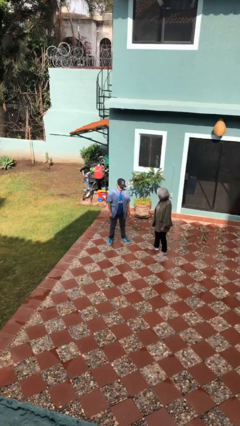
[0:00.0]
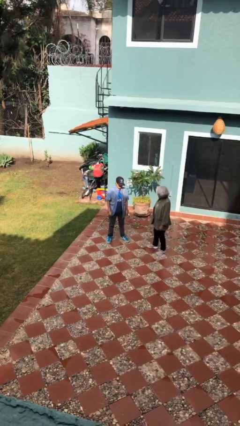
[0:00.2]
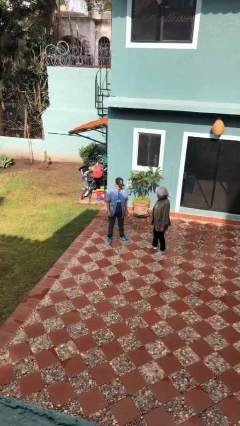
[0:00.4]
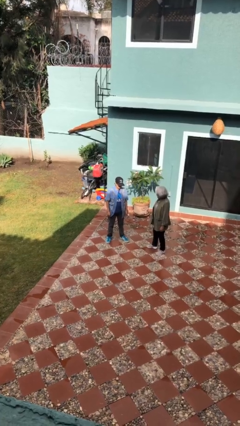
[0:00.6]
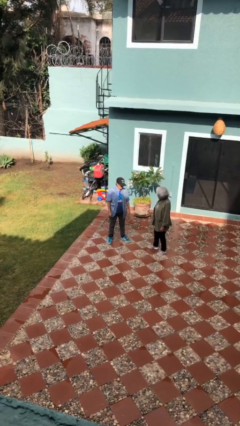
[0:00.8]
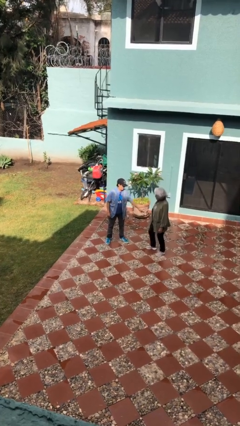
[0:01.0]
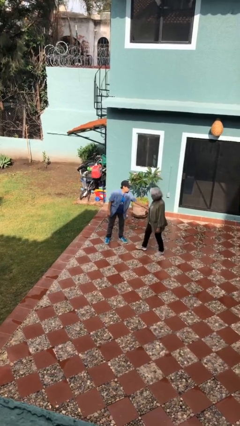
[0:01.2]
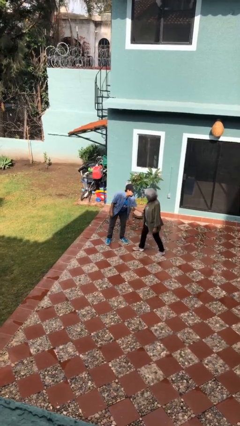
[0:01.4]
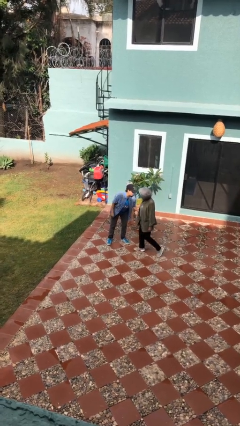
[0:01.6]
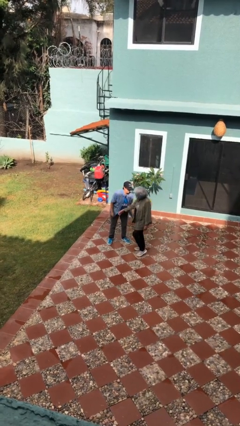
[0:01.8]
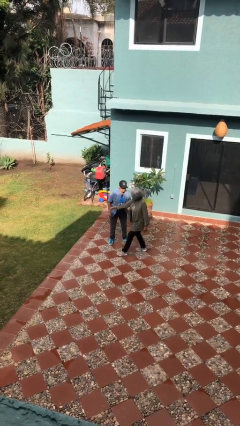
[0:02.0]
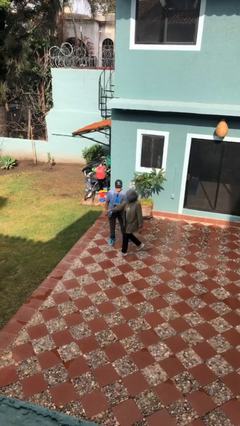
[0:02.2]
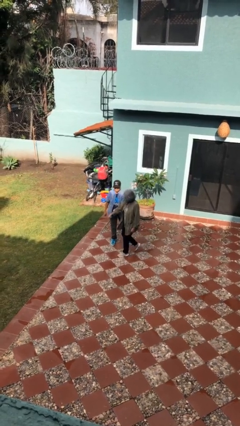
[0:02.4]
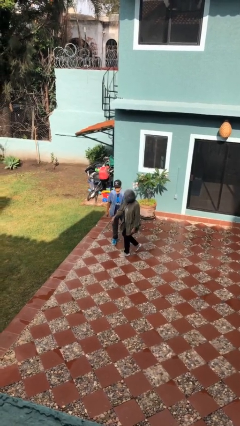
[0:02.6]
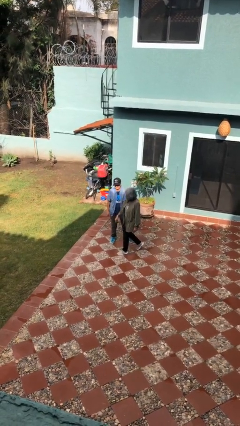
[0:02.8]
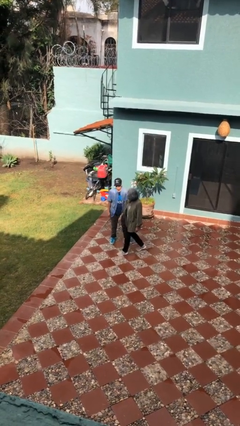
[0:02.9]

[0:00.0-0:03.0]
person grabs person by forearm

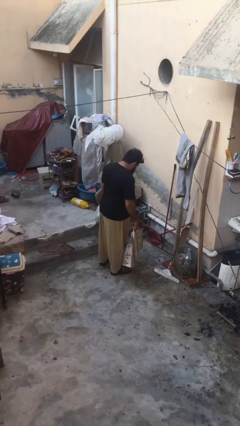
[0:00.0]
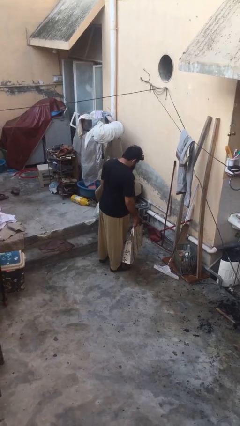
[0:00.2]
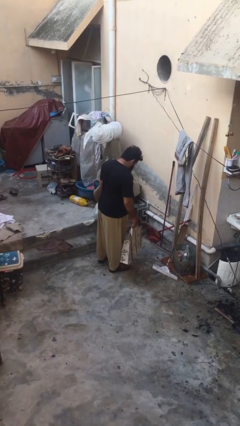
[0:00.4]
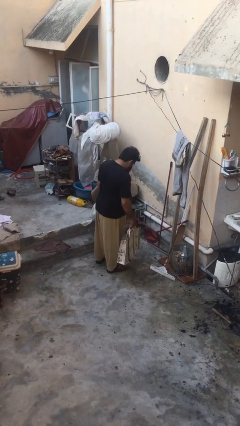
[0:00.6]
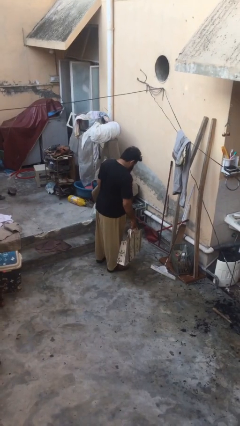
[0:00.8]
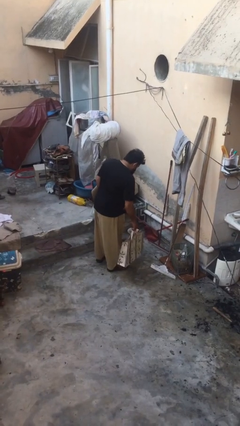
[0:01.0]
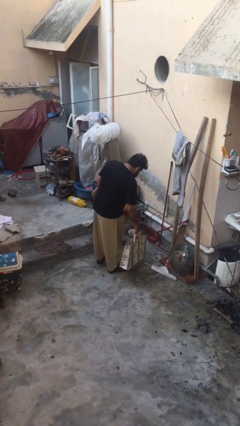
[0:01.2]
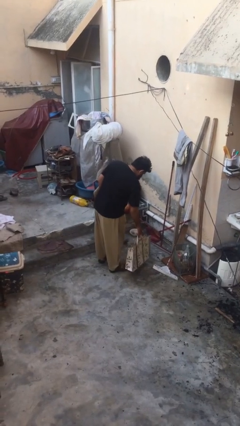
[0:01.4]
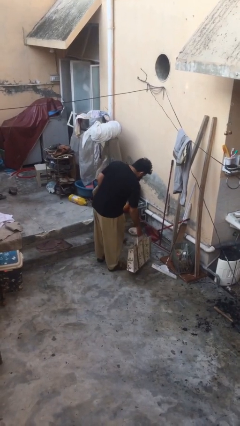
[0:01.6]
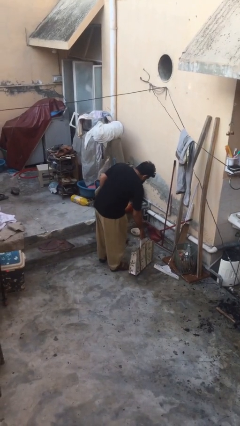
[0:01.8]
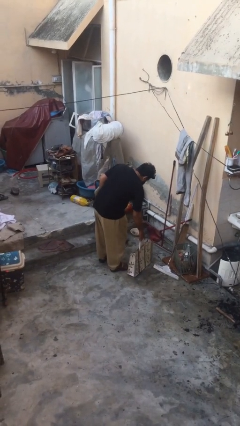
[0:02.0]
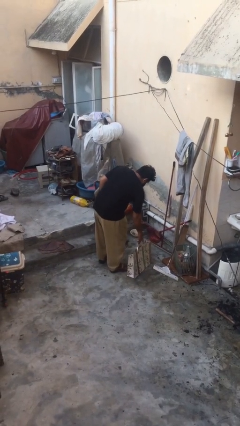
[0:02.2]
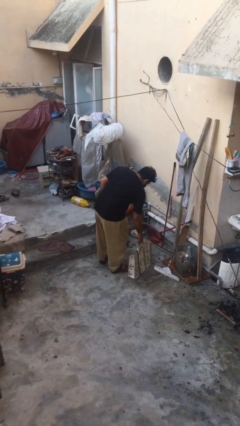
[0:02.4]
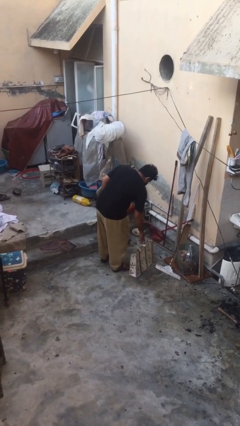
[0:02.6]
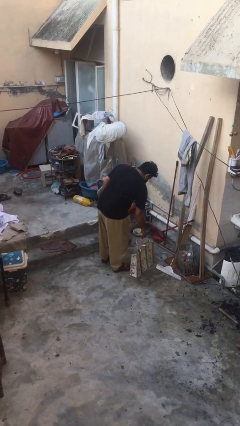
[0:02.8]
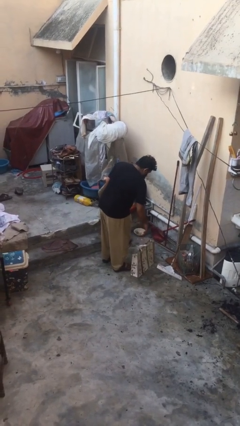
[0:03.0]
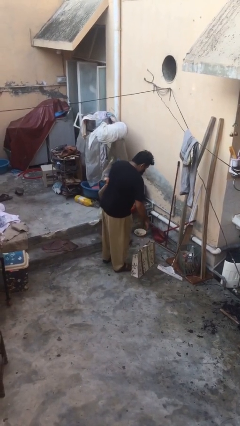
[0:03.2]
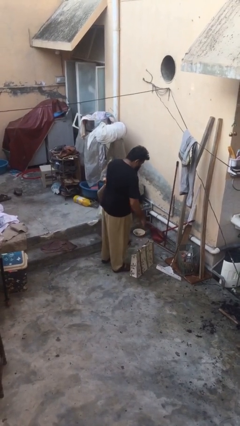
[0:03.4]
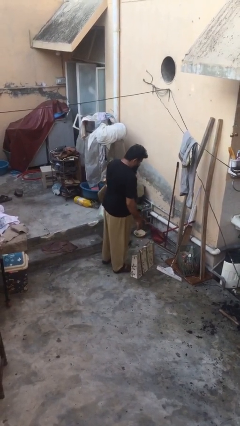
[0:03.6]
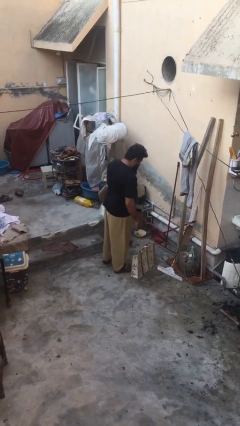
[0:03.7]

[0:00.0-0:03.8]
person puts down object on floor

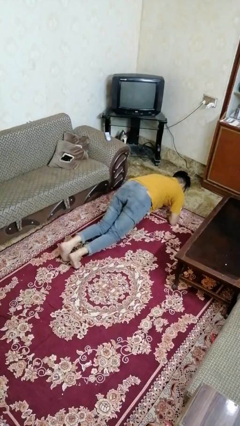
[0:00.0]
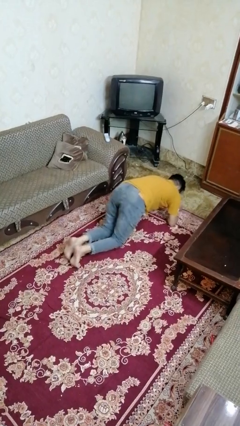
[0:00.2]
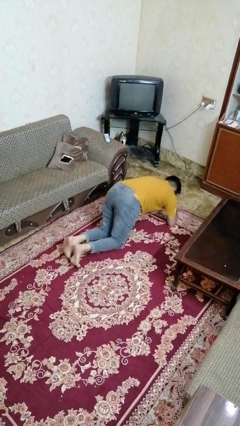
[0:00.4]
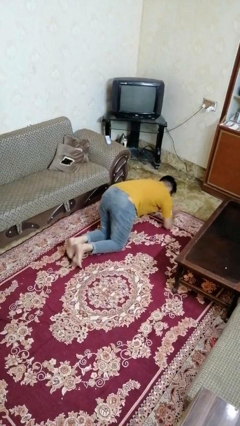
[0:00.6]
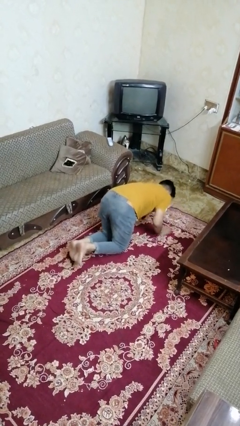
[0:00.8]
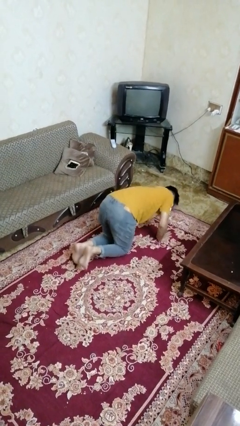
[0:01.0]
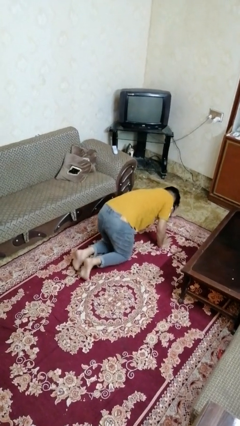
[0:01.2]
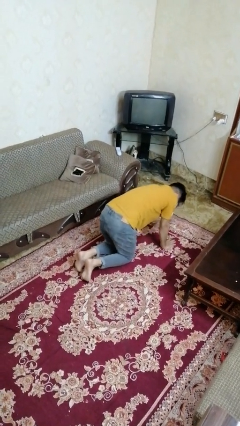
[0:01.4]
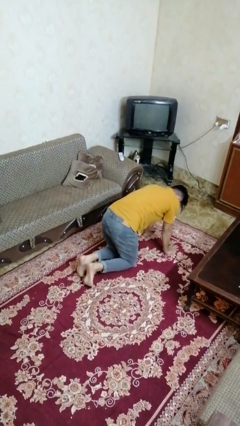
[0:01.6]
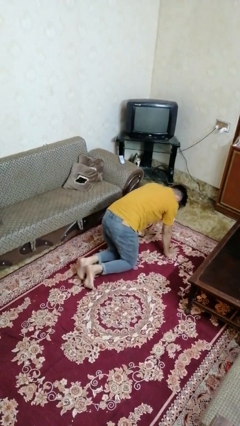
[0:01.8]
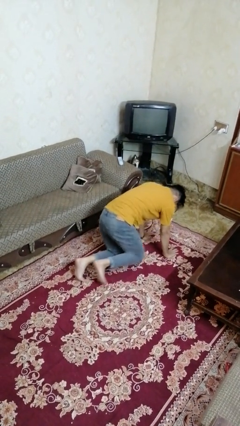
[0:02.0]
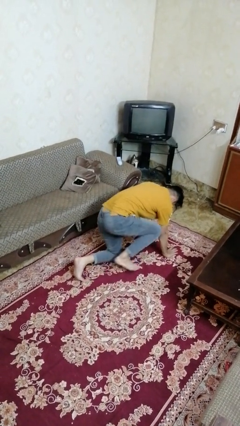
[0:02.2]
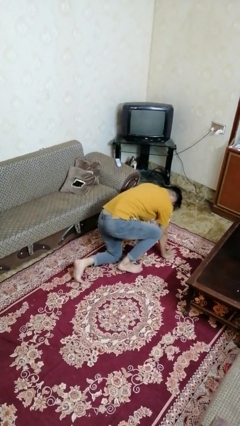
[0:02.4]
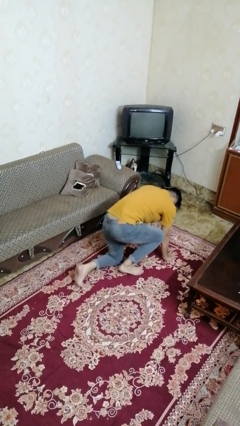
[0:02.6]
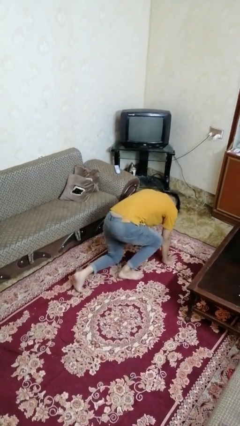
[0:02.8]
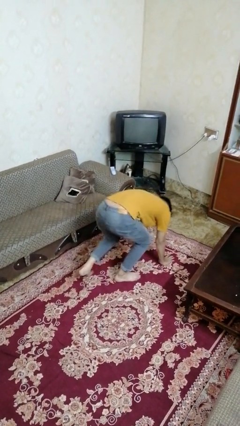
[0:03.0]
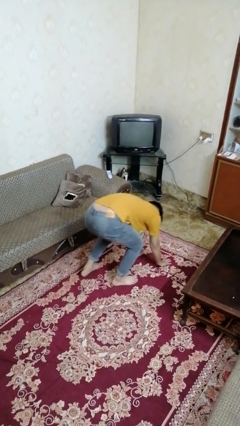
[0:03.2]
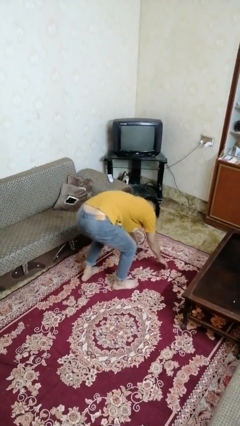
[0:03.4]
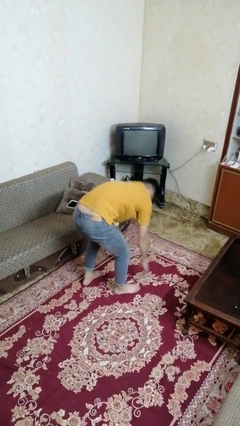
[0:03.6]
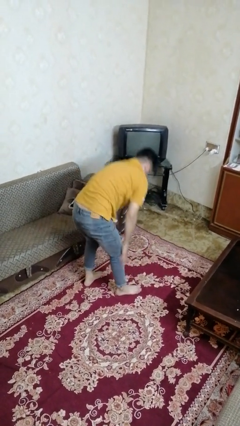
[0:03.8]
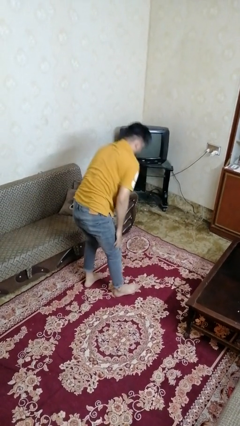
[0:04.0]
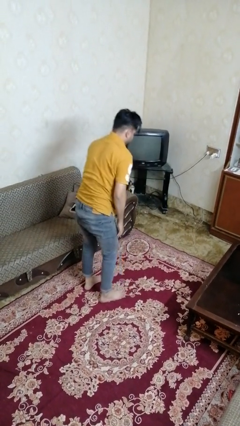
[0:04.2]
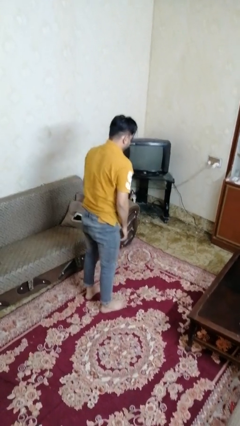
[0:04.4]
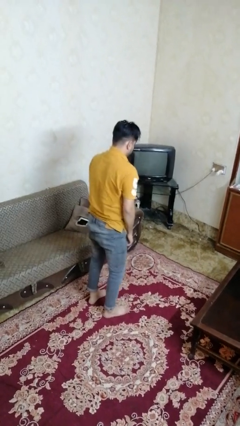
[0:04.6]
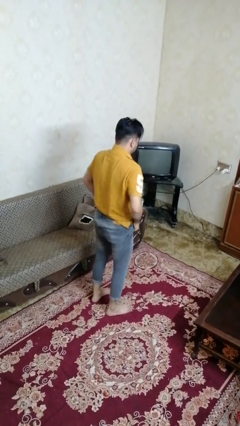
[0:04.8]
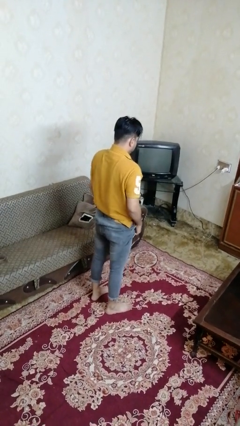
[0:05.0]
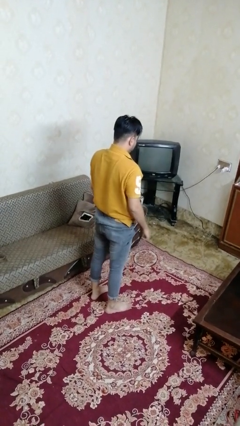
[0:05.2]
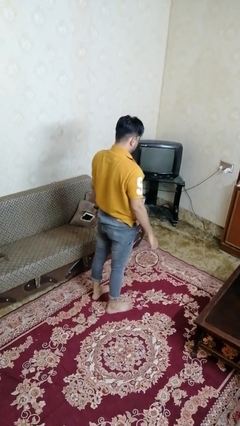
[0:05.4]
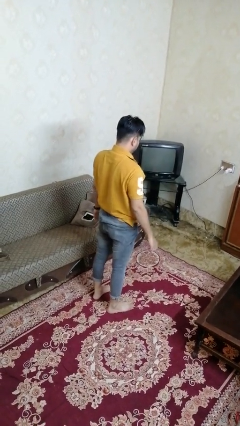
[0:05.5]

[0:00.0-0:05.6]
person stands up from floor

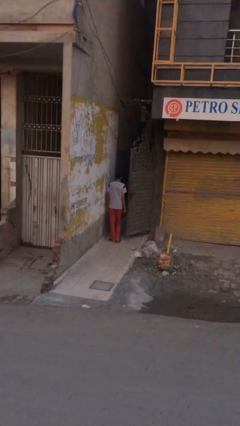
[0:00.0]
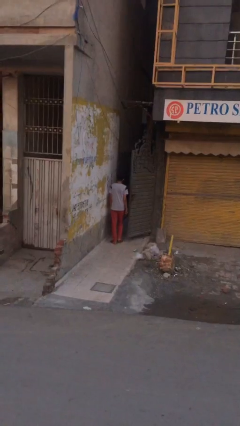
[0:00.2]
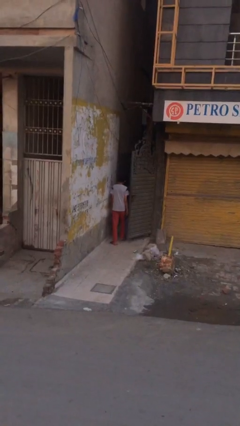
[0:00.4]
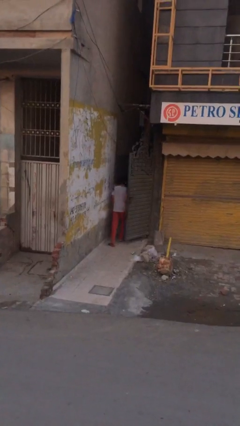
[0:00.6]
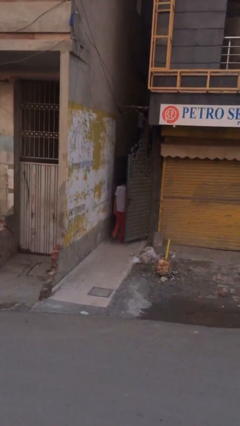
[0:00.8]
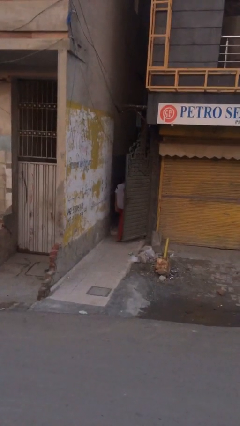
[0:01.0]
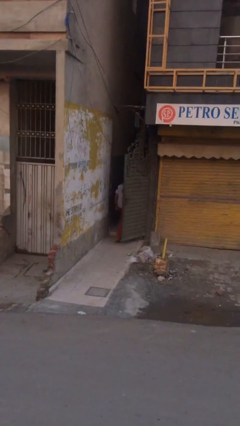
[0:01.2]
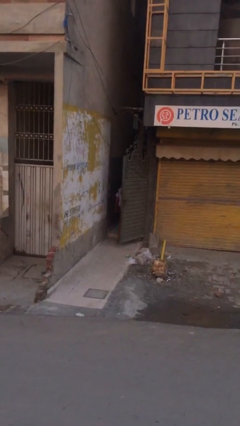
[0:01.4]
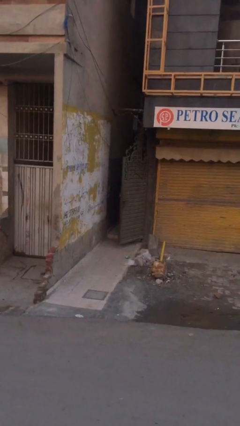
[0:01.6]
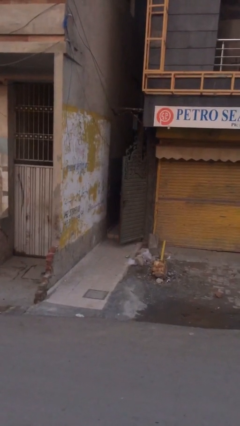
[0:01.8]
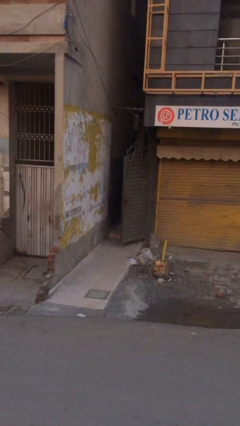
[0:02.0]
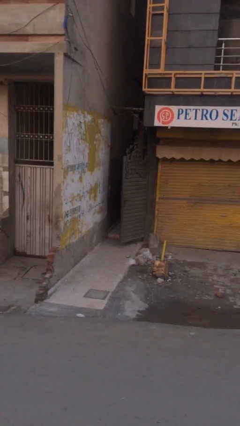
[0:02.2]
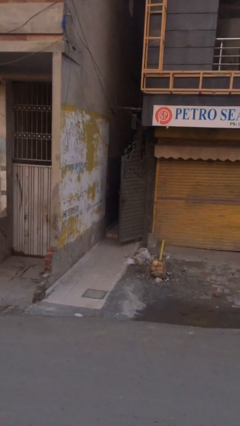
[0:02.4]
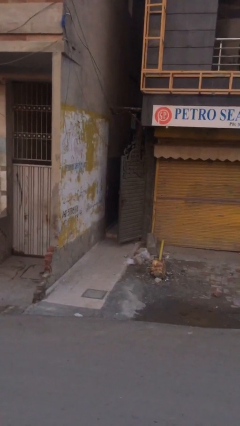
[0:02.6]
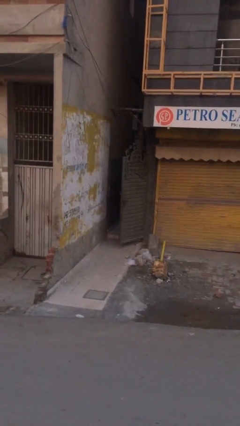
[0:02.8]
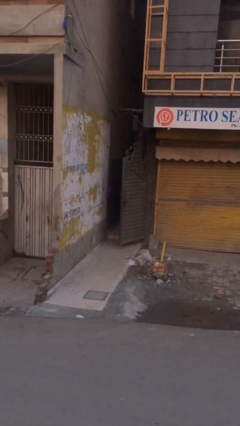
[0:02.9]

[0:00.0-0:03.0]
person exits scene through structure

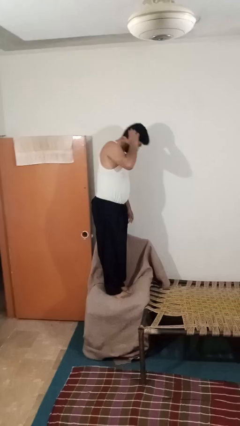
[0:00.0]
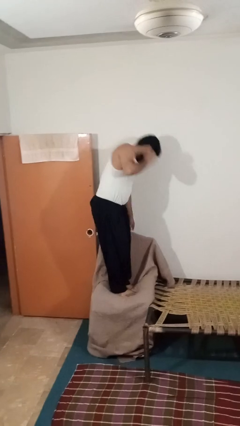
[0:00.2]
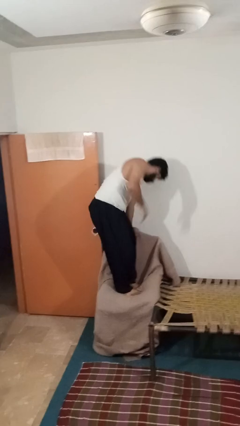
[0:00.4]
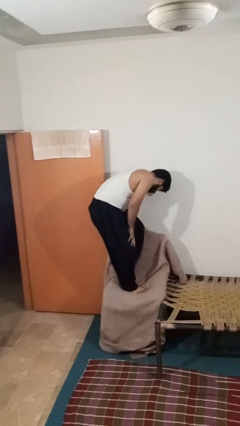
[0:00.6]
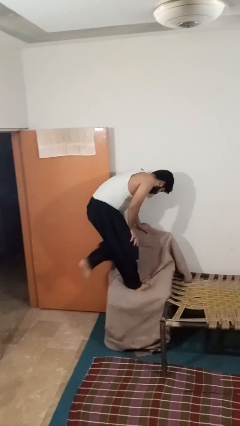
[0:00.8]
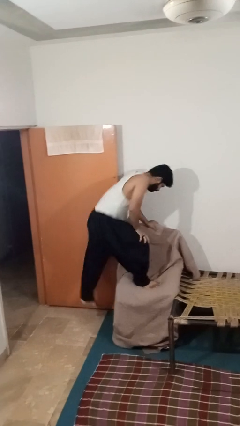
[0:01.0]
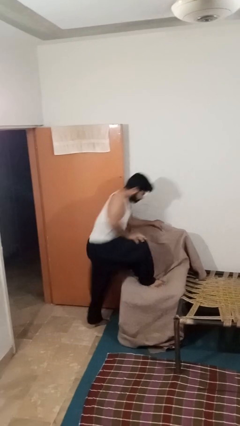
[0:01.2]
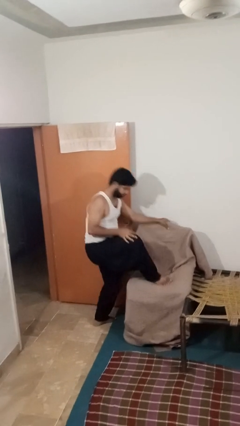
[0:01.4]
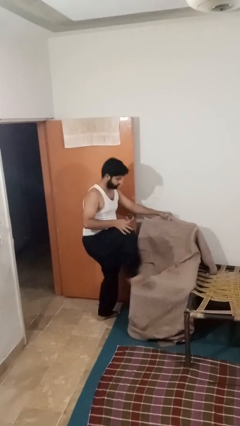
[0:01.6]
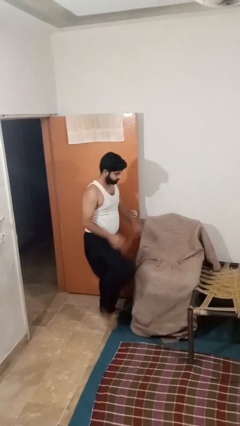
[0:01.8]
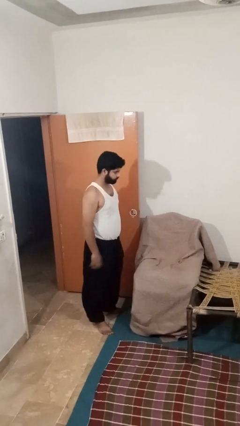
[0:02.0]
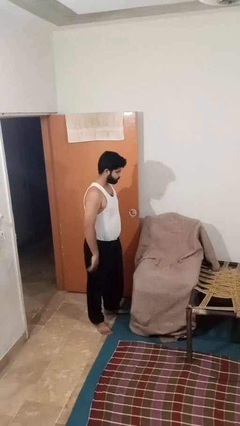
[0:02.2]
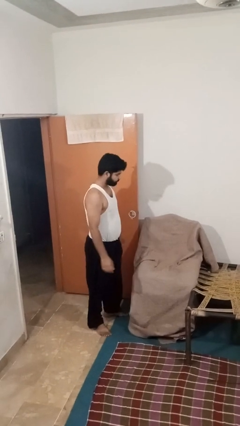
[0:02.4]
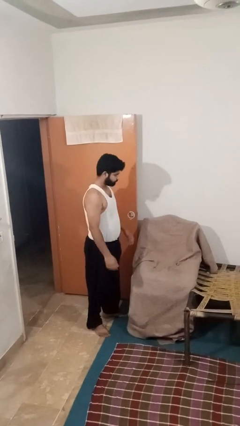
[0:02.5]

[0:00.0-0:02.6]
person climbs off couch
